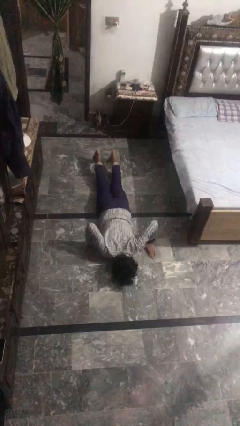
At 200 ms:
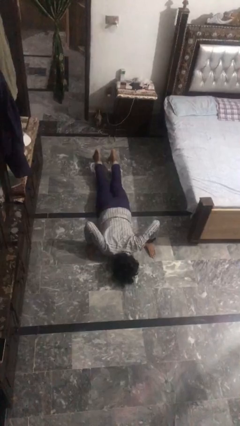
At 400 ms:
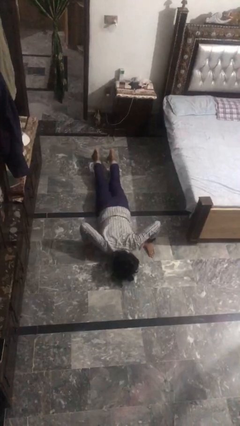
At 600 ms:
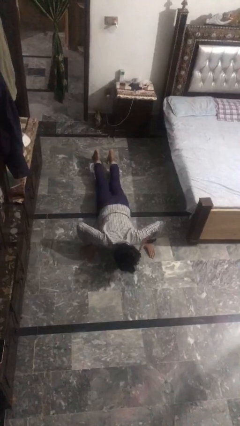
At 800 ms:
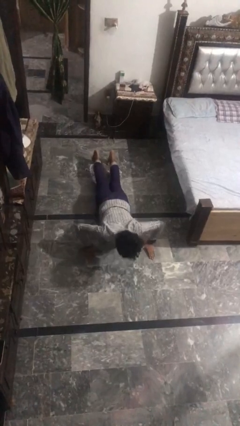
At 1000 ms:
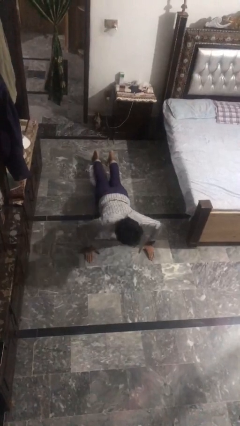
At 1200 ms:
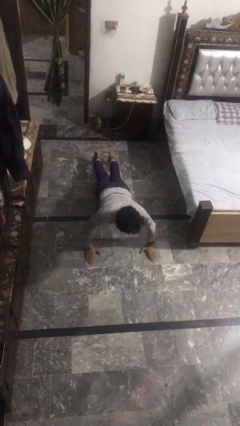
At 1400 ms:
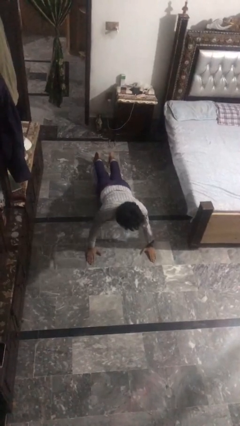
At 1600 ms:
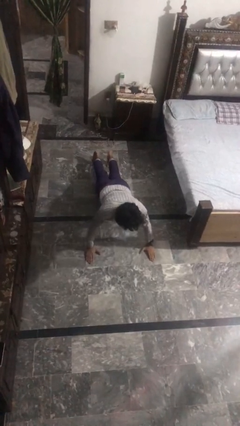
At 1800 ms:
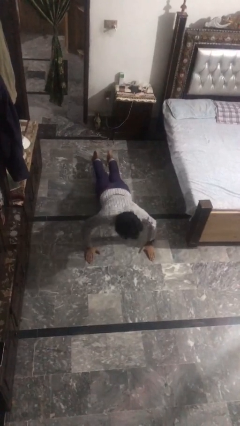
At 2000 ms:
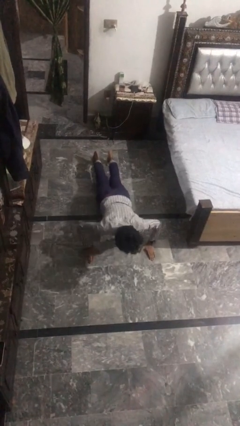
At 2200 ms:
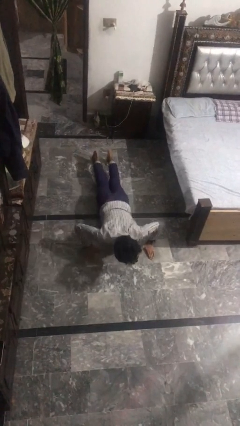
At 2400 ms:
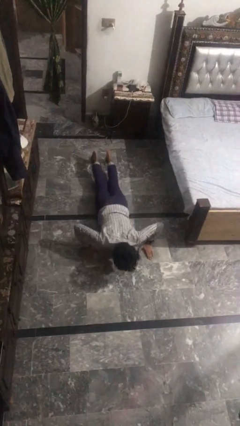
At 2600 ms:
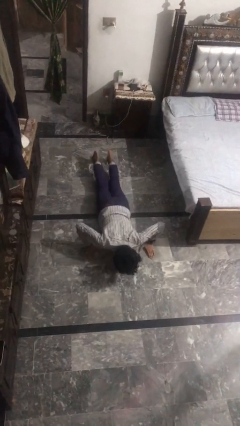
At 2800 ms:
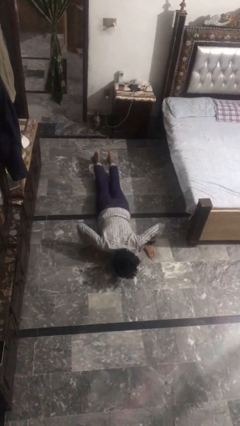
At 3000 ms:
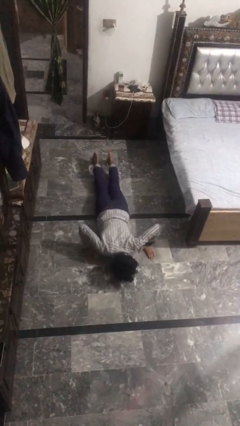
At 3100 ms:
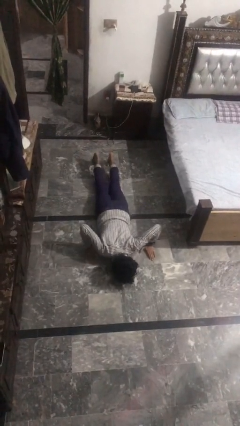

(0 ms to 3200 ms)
person exercises with pushup

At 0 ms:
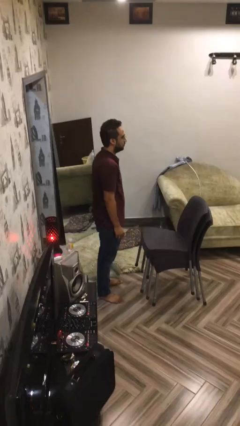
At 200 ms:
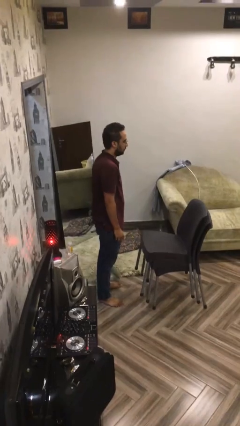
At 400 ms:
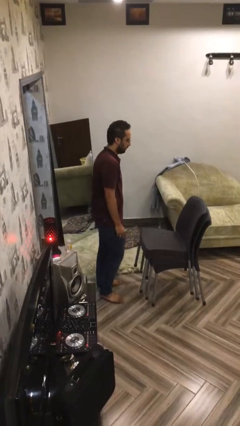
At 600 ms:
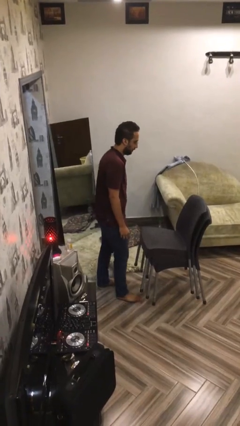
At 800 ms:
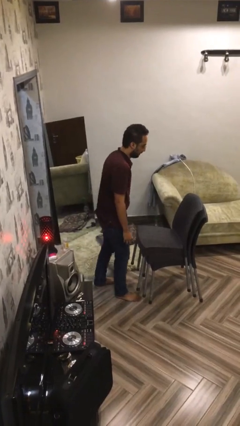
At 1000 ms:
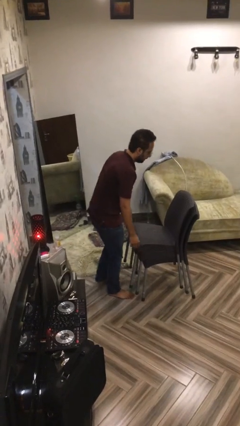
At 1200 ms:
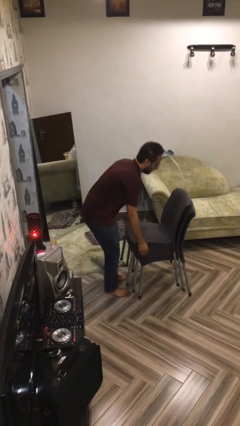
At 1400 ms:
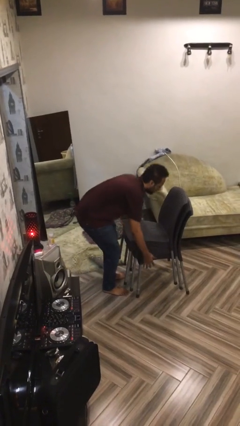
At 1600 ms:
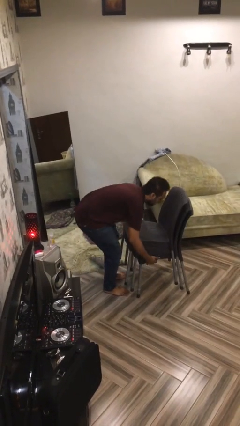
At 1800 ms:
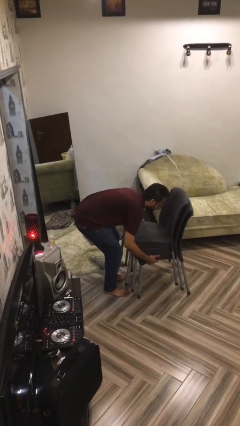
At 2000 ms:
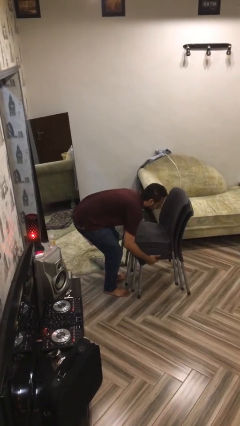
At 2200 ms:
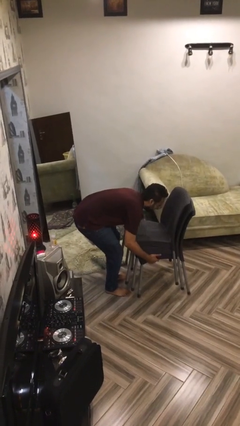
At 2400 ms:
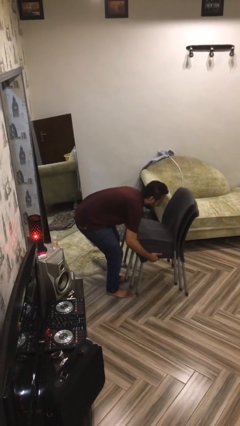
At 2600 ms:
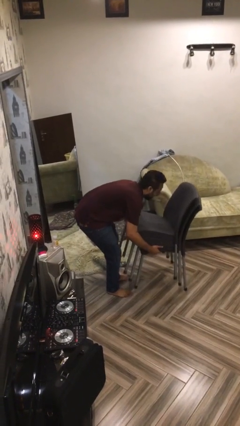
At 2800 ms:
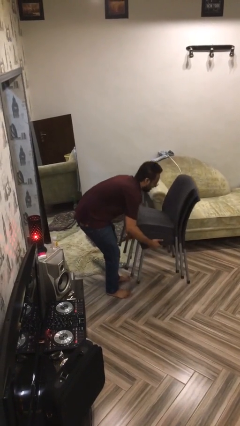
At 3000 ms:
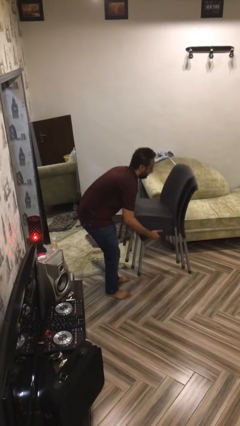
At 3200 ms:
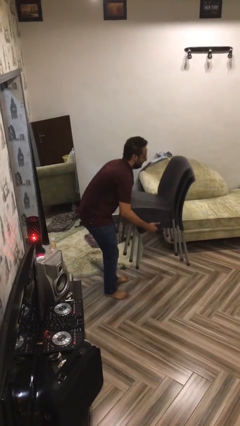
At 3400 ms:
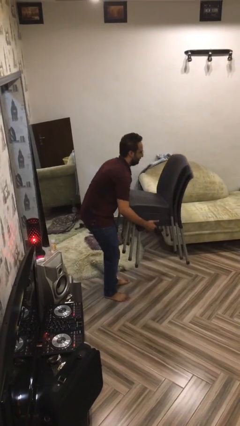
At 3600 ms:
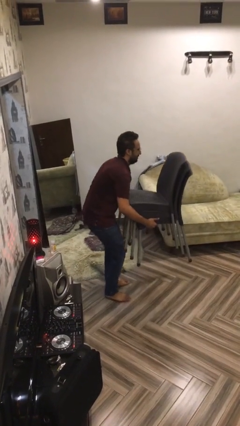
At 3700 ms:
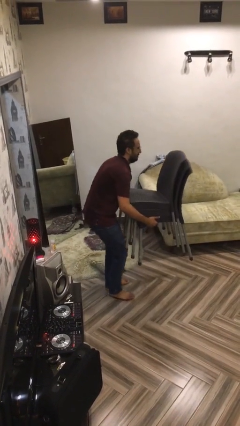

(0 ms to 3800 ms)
person picks up object from floor

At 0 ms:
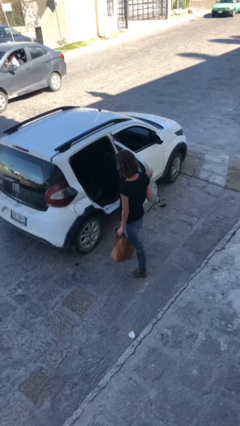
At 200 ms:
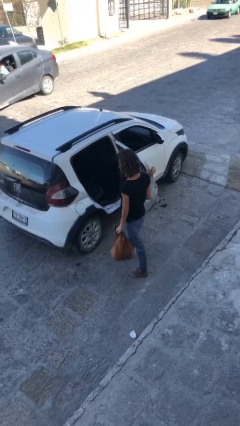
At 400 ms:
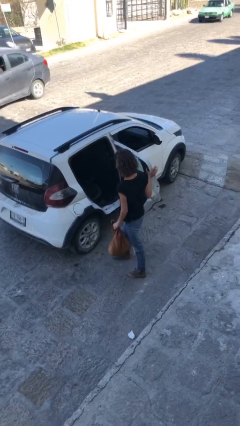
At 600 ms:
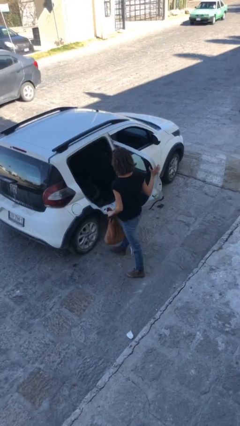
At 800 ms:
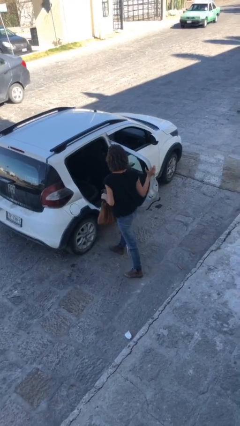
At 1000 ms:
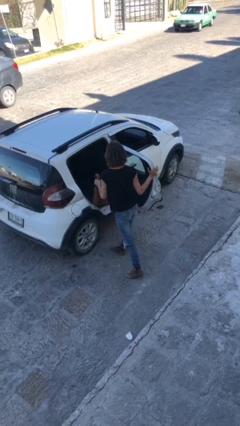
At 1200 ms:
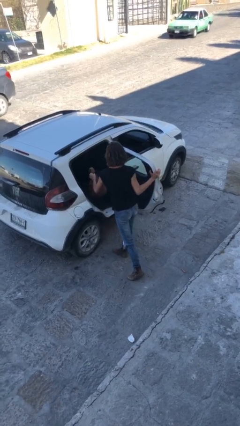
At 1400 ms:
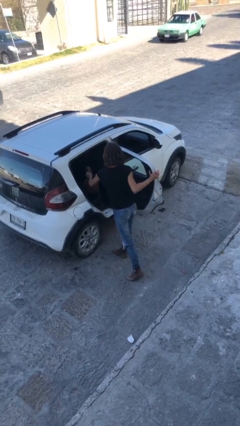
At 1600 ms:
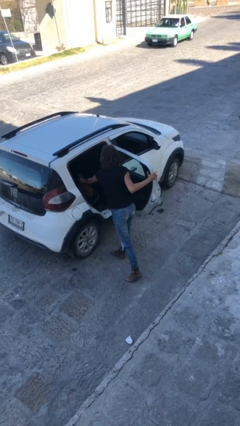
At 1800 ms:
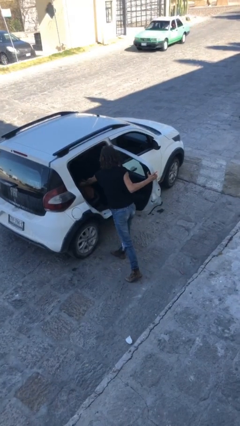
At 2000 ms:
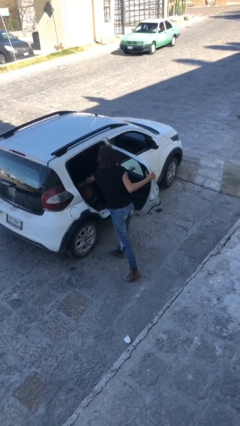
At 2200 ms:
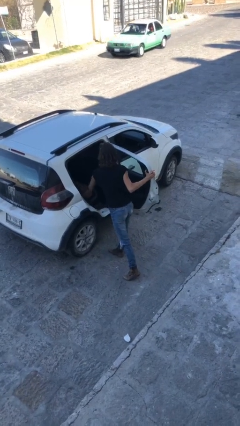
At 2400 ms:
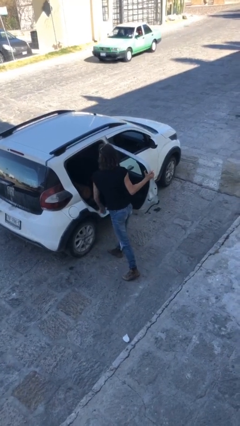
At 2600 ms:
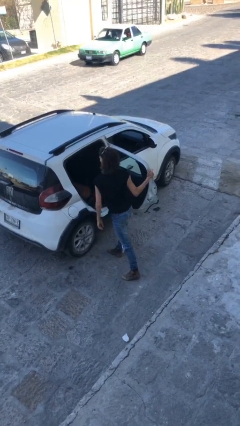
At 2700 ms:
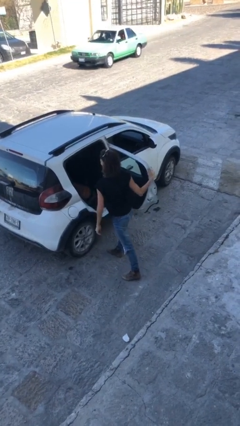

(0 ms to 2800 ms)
person loads car

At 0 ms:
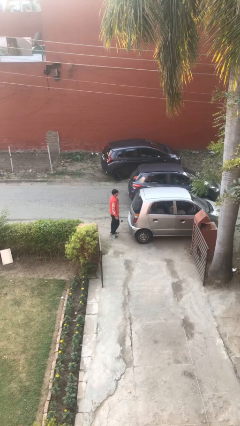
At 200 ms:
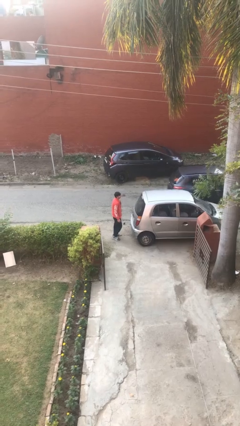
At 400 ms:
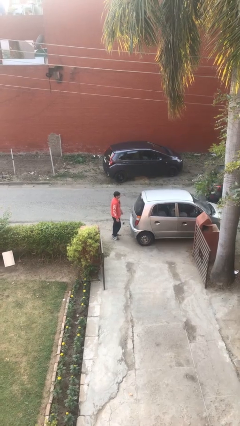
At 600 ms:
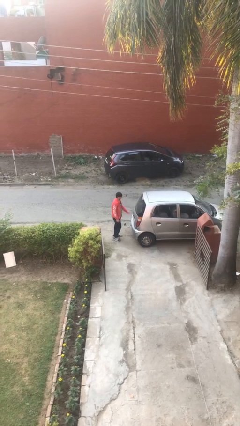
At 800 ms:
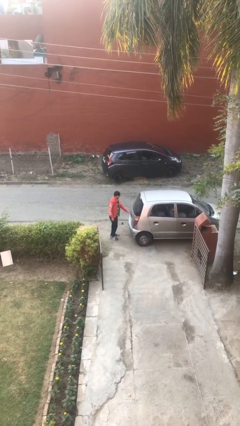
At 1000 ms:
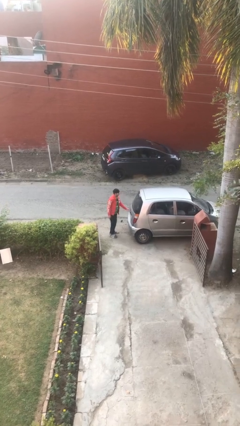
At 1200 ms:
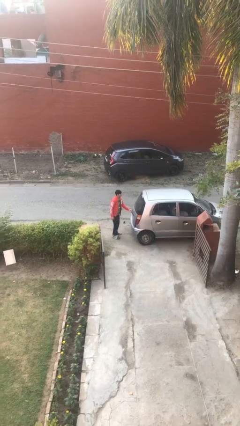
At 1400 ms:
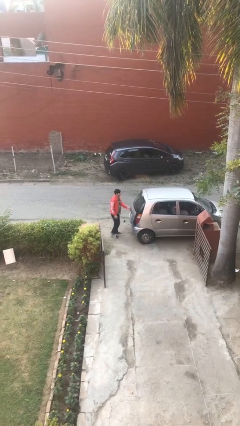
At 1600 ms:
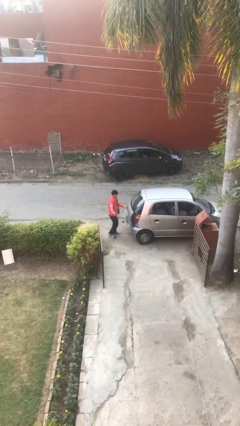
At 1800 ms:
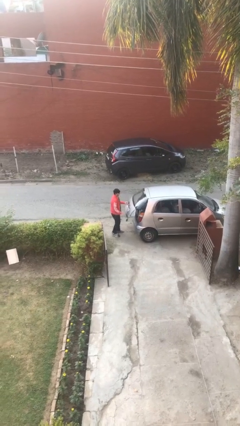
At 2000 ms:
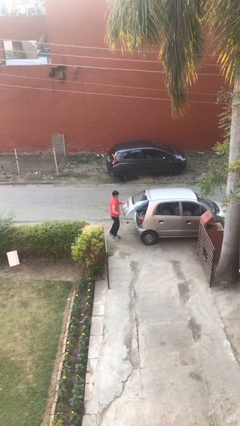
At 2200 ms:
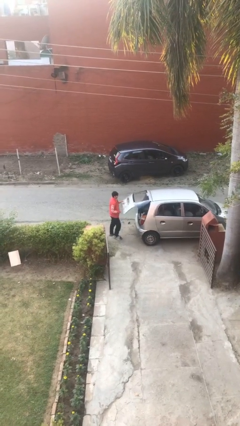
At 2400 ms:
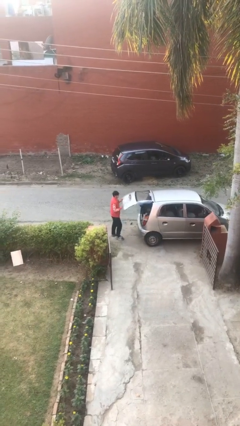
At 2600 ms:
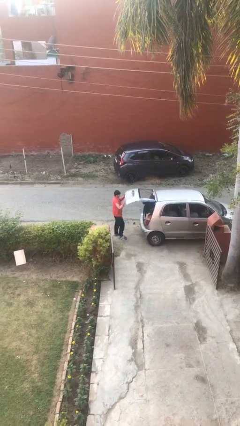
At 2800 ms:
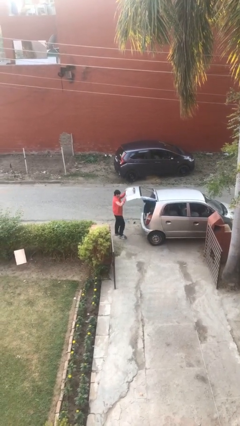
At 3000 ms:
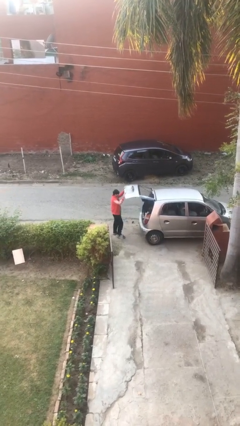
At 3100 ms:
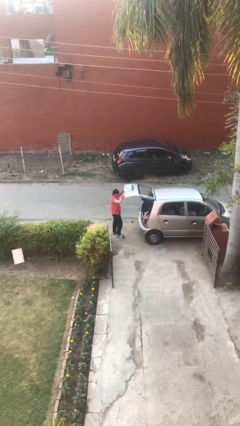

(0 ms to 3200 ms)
person opens car trunk

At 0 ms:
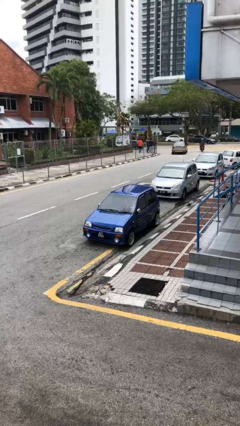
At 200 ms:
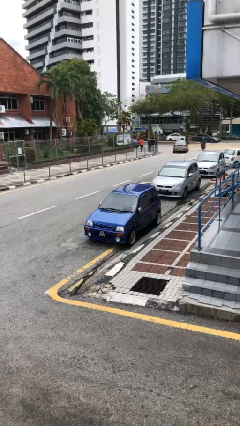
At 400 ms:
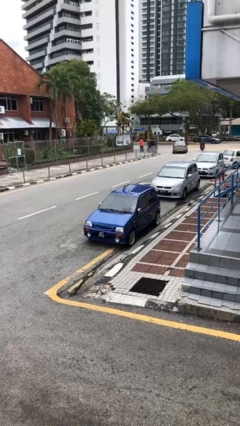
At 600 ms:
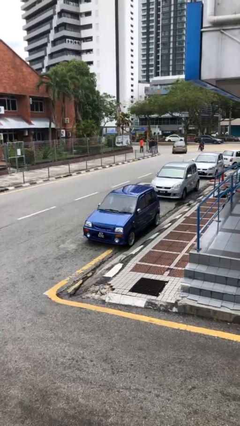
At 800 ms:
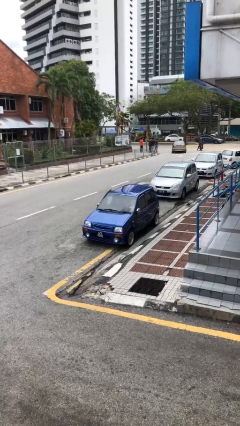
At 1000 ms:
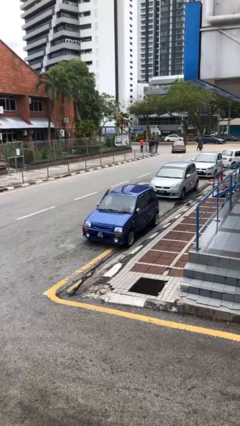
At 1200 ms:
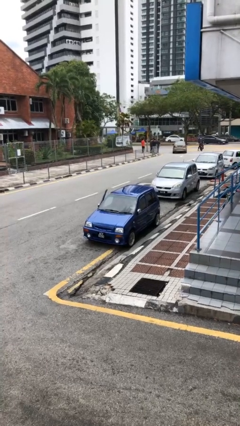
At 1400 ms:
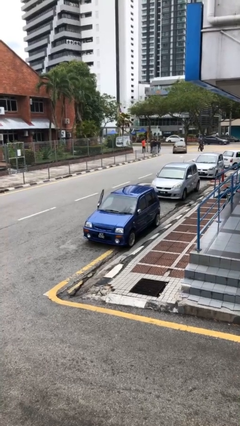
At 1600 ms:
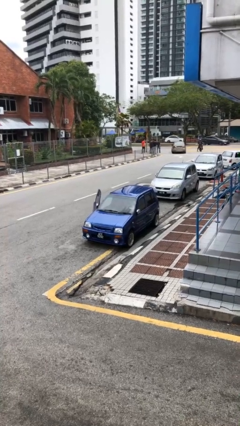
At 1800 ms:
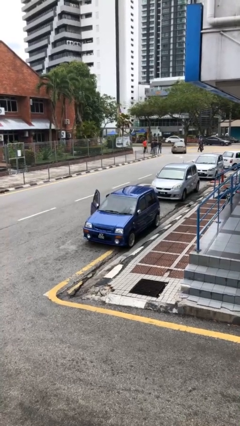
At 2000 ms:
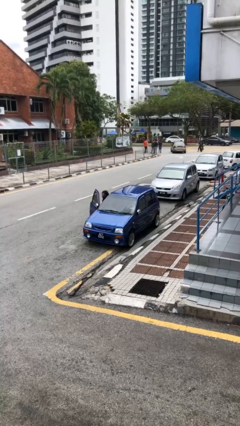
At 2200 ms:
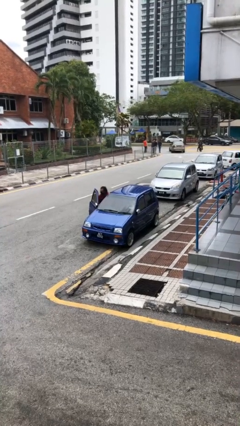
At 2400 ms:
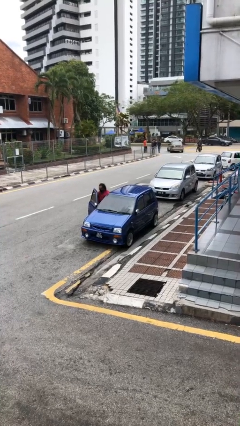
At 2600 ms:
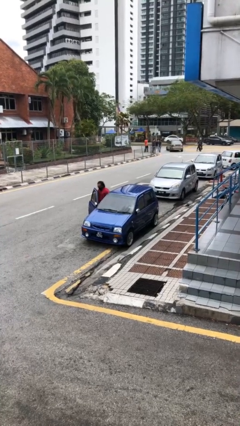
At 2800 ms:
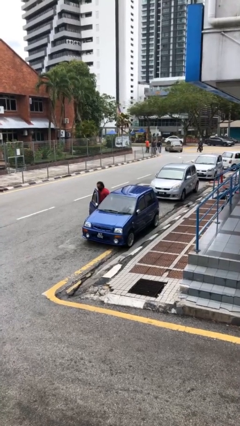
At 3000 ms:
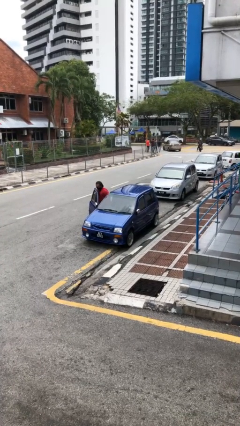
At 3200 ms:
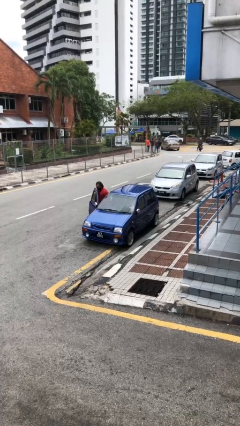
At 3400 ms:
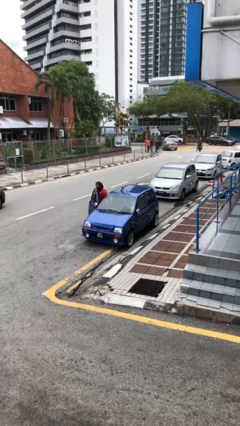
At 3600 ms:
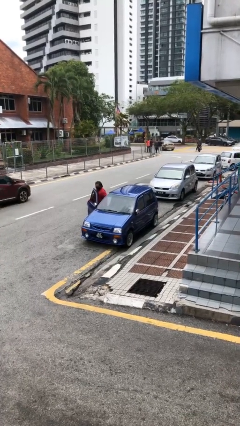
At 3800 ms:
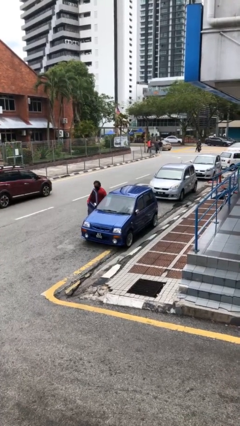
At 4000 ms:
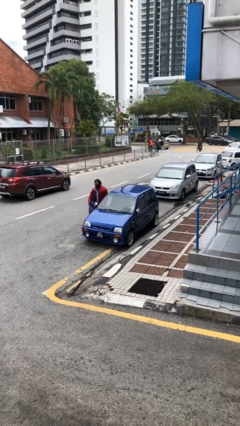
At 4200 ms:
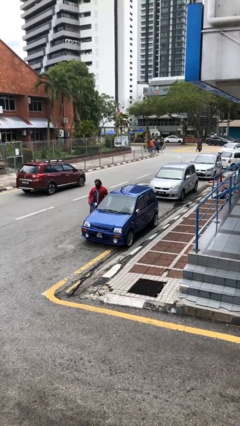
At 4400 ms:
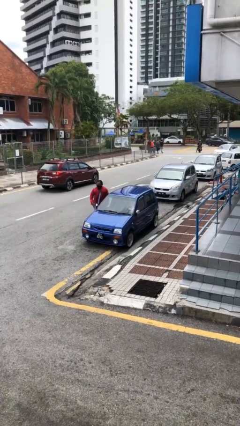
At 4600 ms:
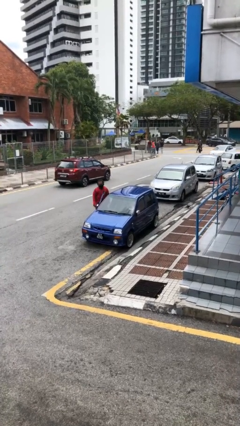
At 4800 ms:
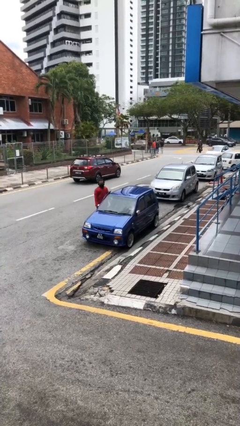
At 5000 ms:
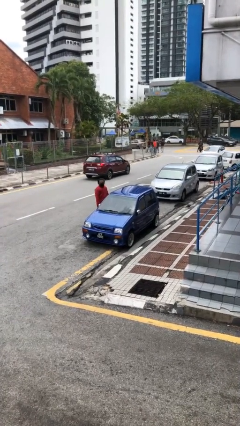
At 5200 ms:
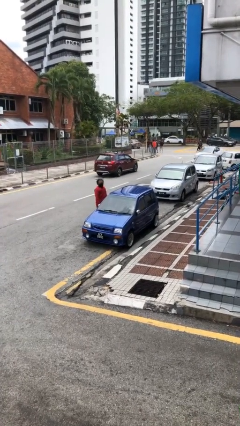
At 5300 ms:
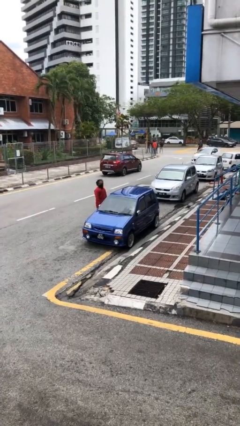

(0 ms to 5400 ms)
car drops off person
